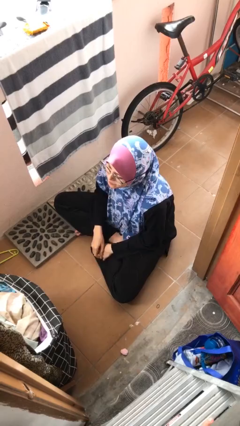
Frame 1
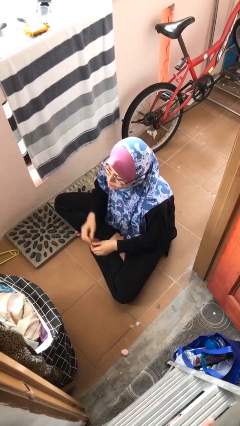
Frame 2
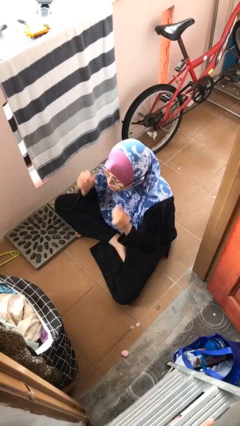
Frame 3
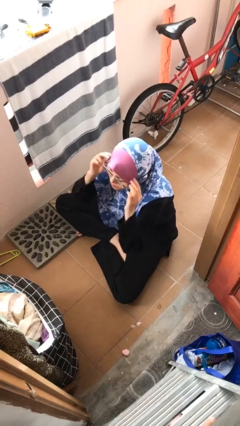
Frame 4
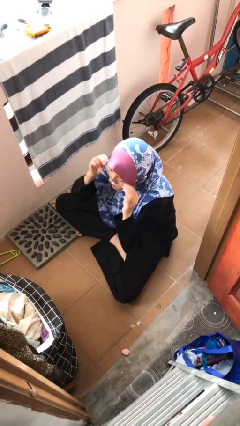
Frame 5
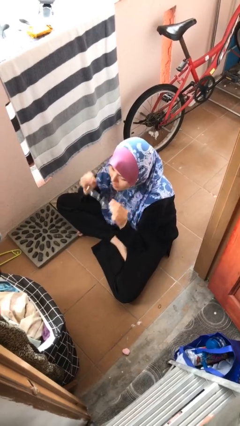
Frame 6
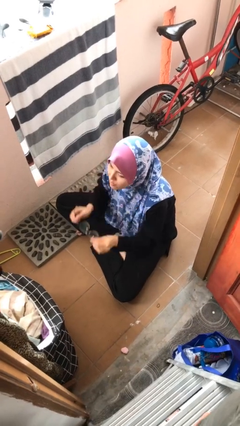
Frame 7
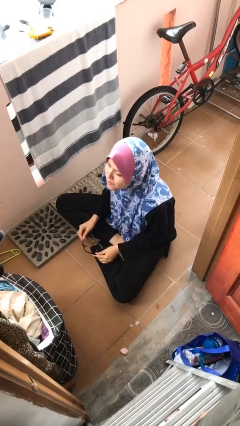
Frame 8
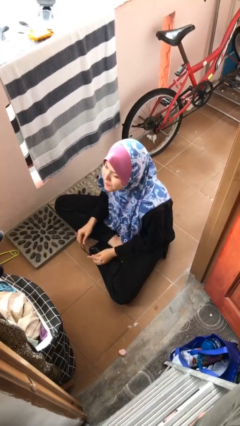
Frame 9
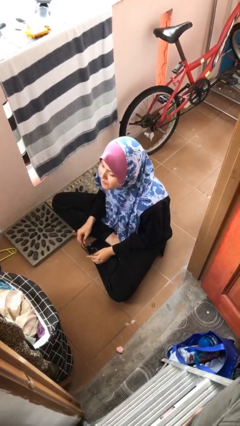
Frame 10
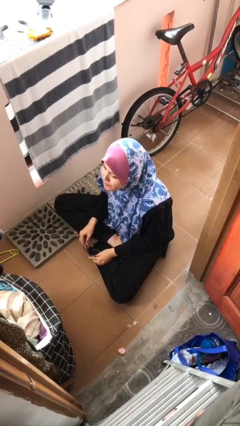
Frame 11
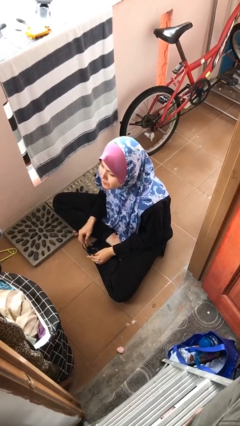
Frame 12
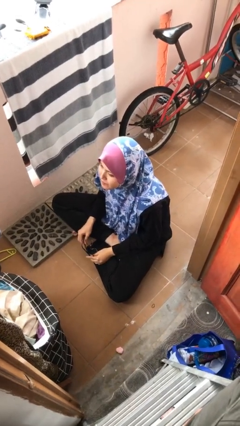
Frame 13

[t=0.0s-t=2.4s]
person takes off glasses

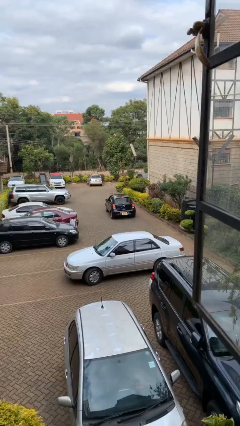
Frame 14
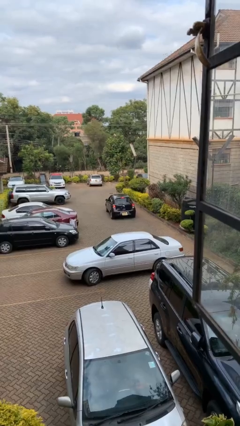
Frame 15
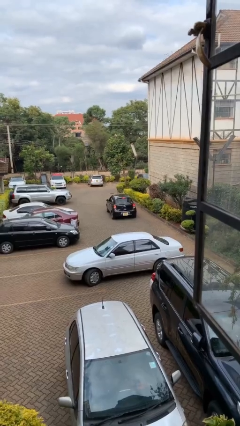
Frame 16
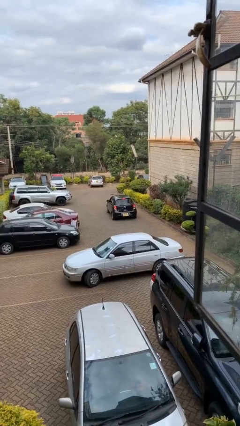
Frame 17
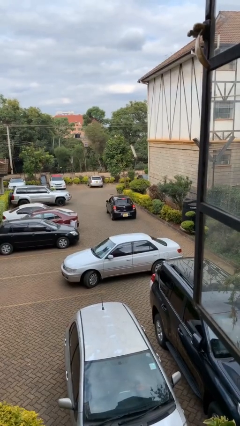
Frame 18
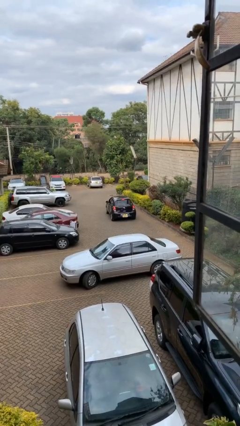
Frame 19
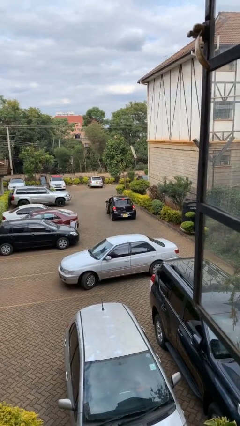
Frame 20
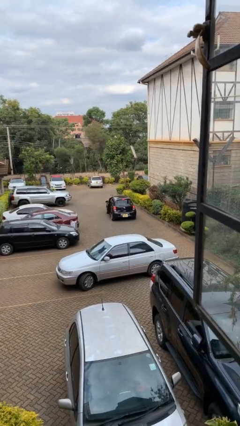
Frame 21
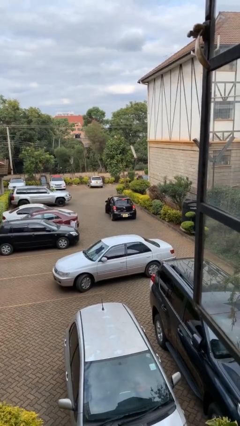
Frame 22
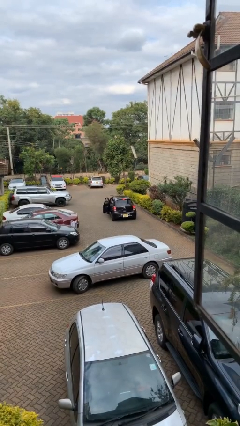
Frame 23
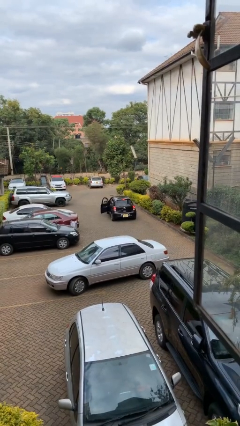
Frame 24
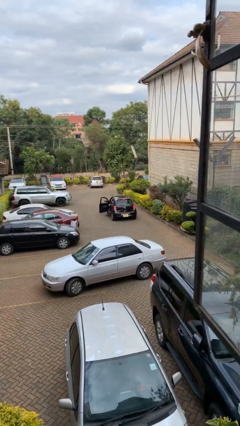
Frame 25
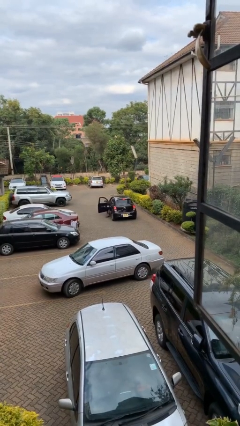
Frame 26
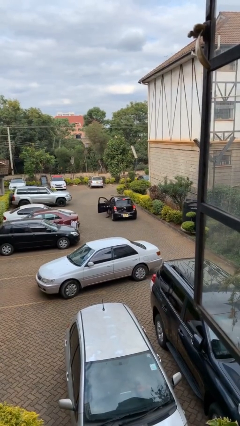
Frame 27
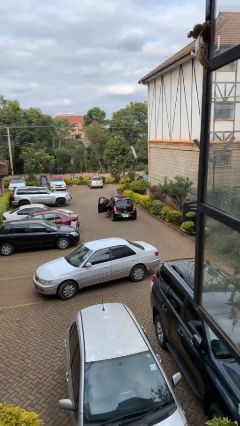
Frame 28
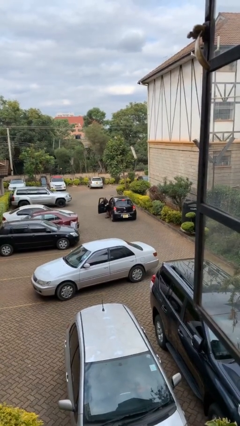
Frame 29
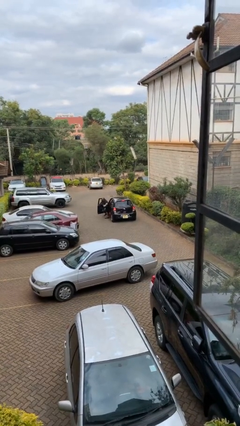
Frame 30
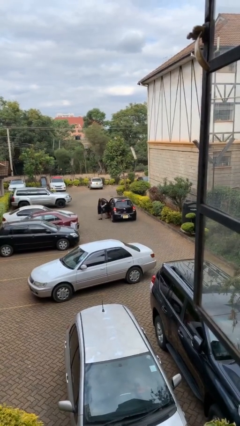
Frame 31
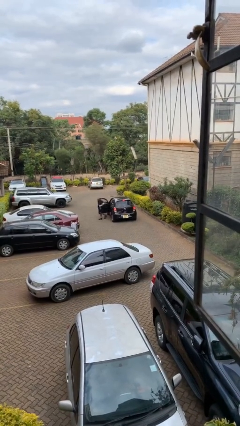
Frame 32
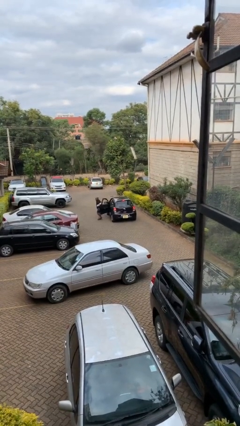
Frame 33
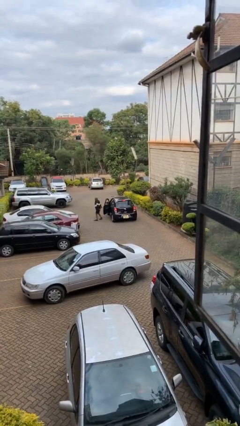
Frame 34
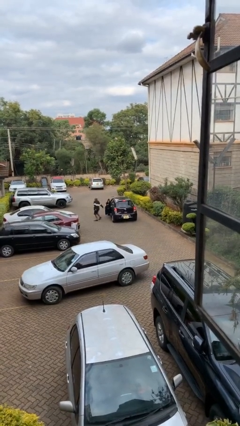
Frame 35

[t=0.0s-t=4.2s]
car drops off person

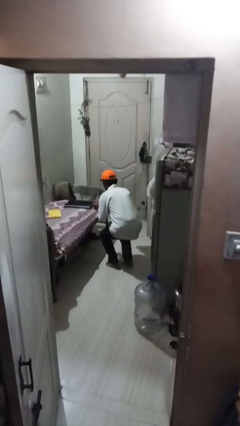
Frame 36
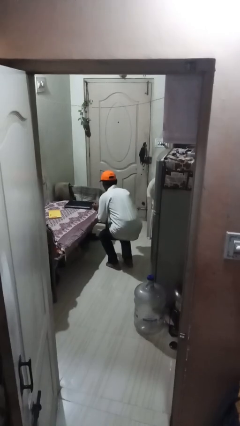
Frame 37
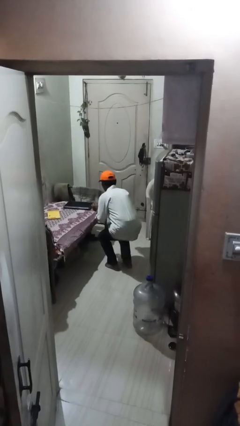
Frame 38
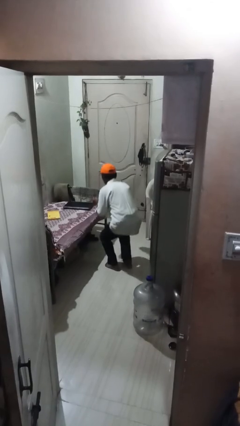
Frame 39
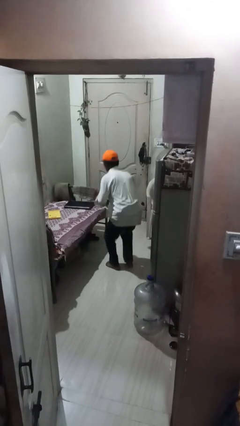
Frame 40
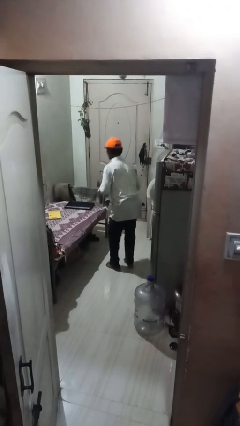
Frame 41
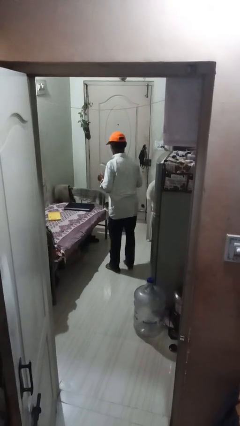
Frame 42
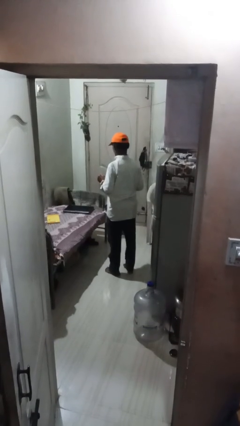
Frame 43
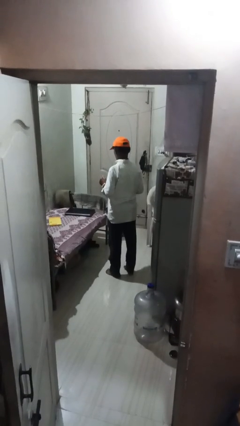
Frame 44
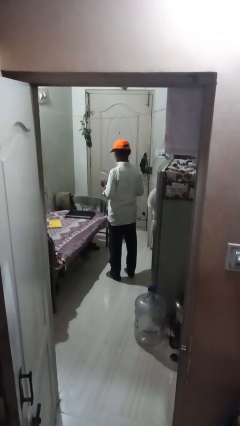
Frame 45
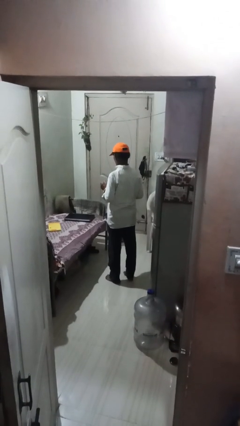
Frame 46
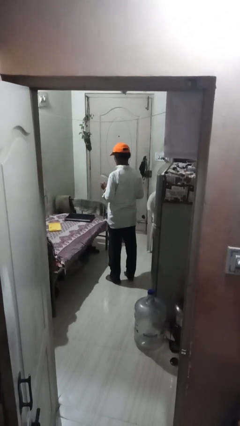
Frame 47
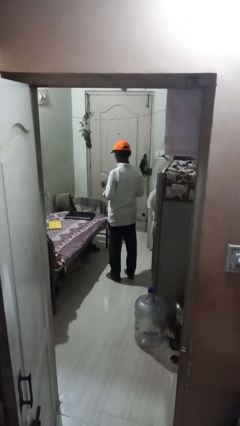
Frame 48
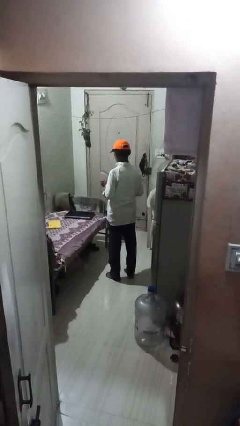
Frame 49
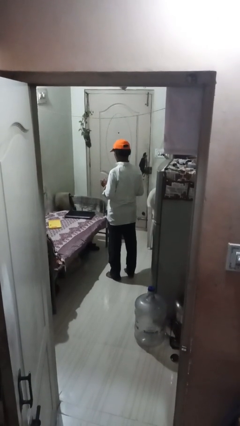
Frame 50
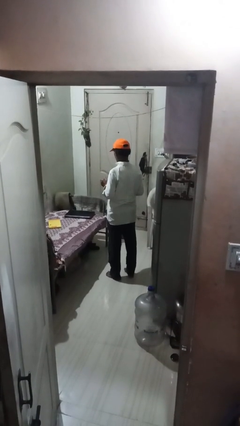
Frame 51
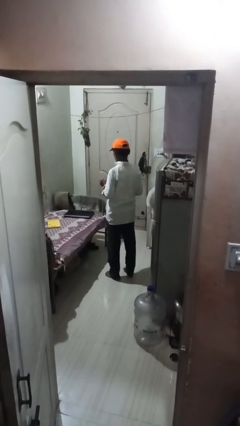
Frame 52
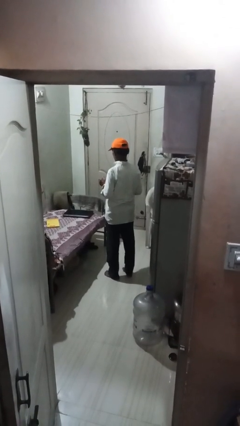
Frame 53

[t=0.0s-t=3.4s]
person stands up

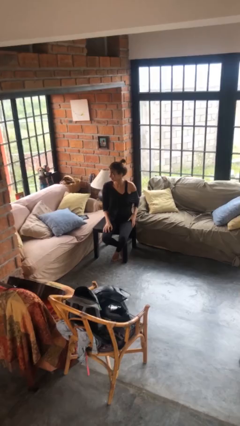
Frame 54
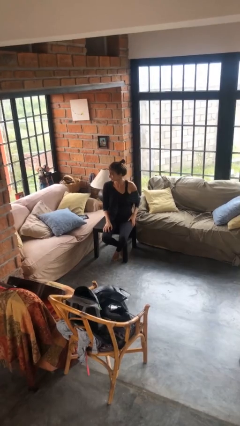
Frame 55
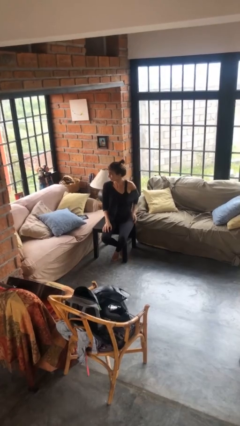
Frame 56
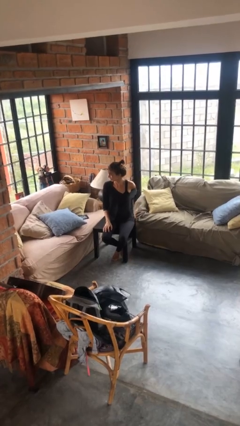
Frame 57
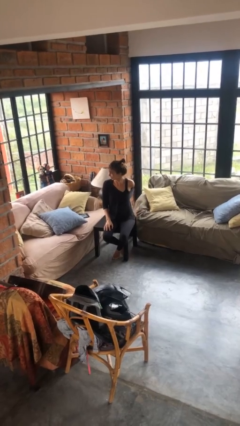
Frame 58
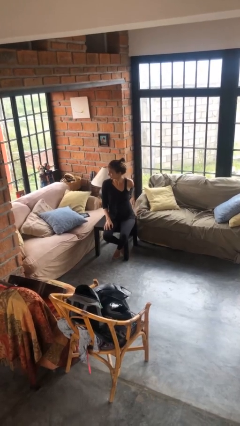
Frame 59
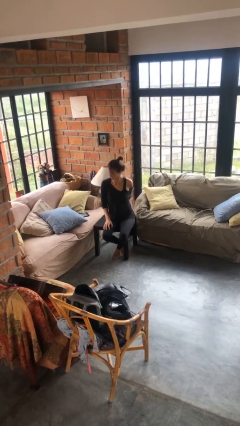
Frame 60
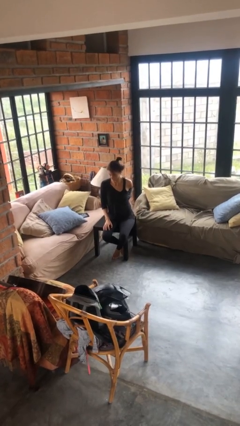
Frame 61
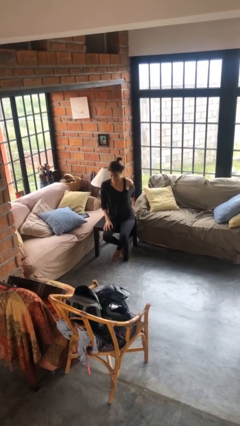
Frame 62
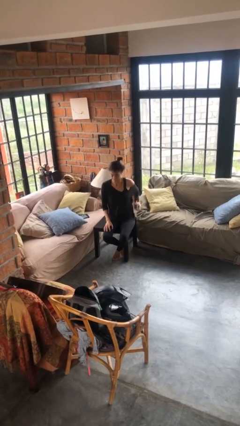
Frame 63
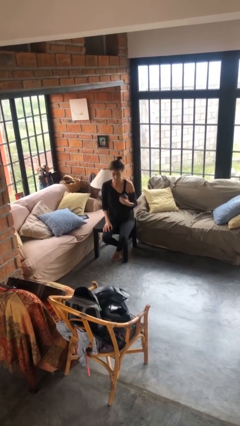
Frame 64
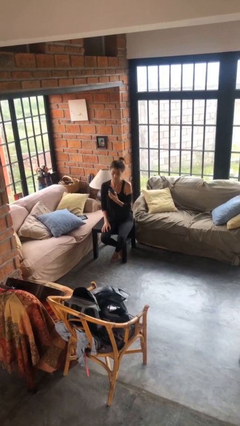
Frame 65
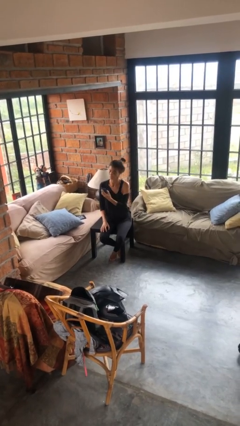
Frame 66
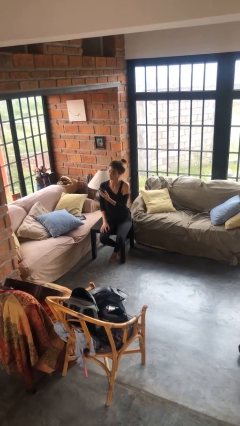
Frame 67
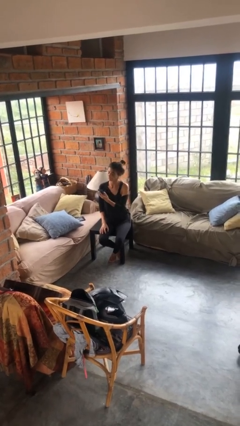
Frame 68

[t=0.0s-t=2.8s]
person takes phone from pocket

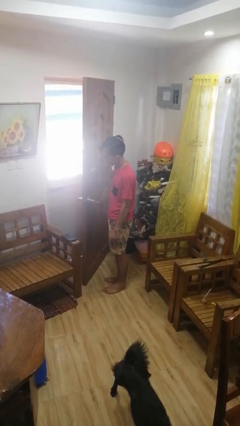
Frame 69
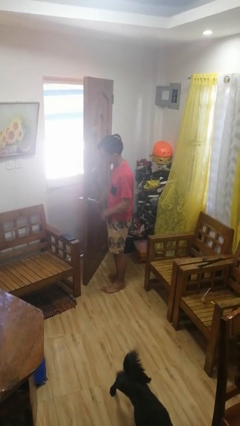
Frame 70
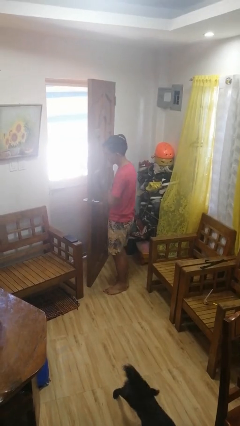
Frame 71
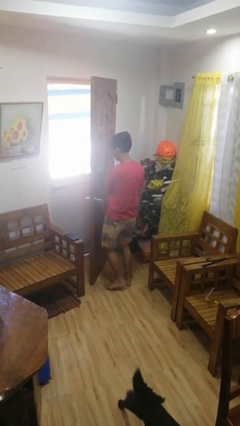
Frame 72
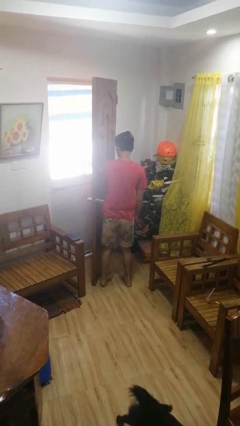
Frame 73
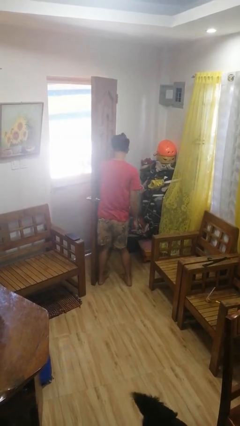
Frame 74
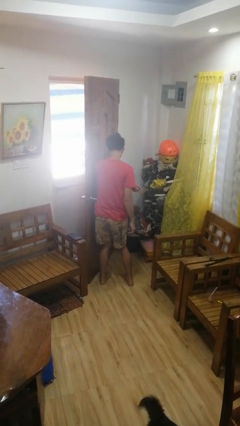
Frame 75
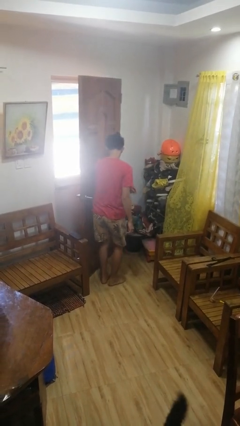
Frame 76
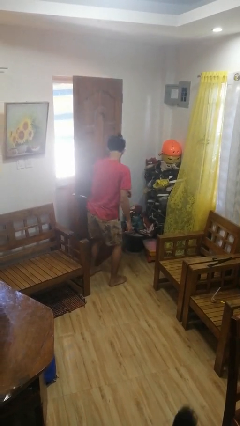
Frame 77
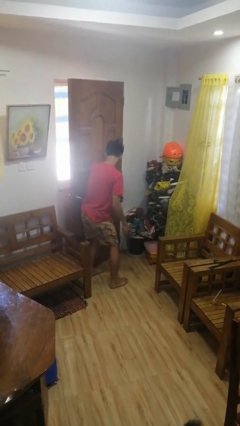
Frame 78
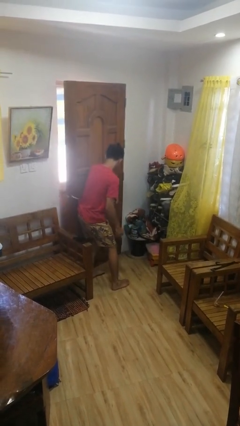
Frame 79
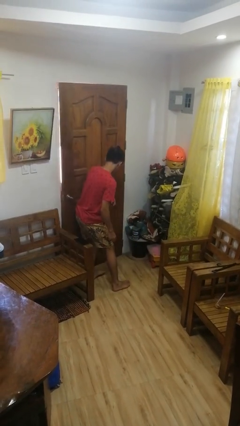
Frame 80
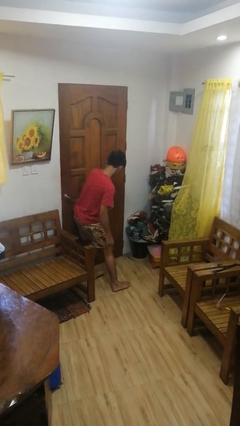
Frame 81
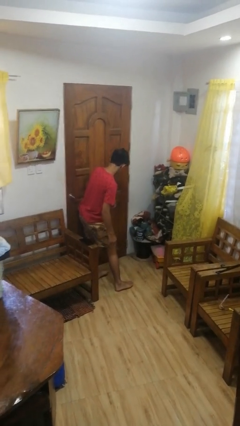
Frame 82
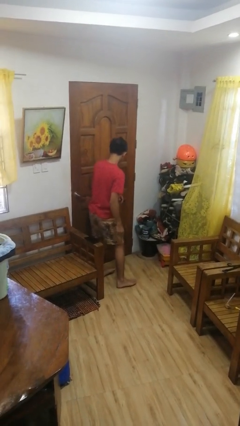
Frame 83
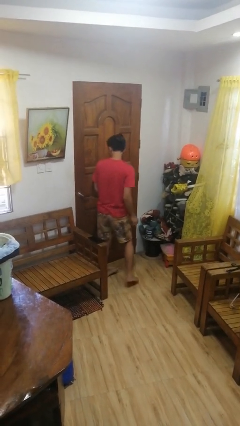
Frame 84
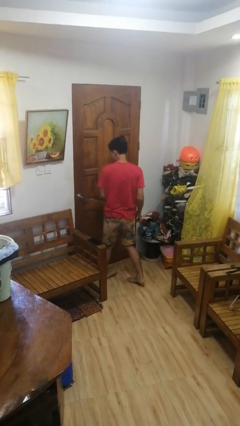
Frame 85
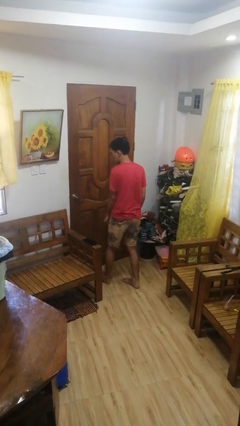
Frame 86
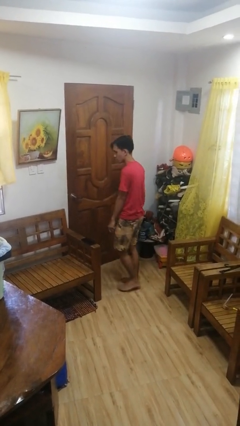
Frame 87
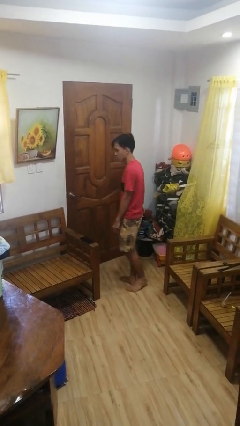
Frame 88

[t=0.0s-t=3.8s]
person closes door with hip

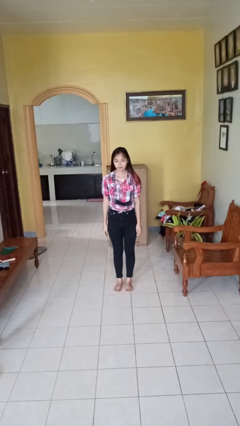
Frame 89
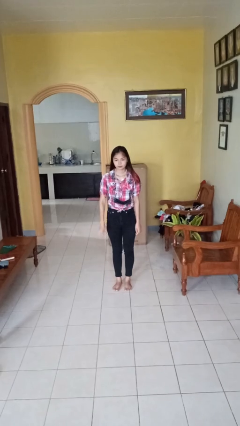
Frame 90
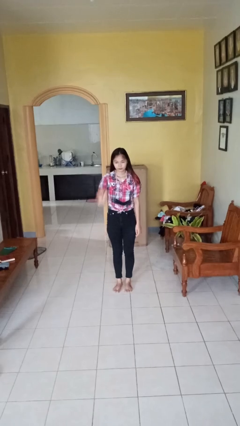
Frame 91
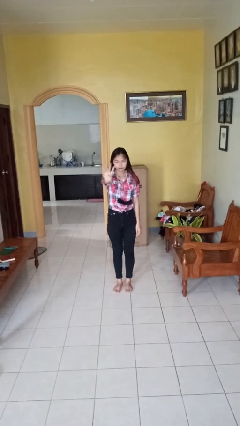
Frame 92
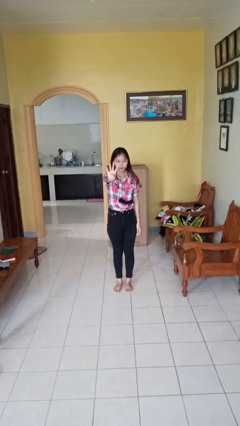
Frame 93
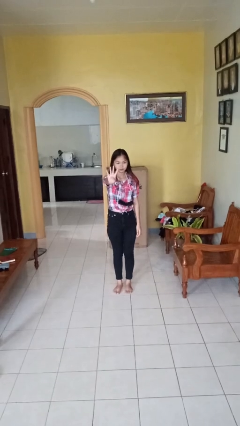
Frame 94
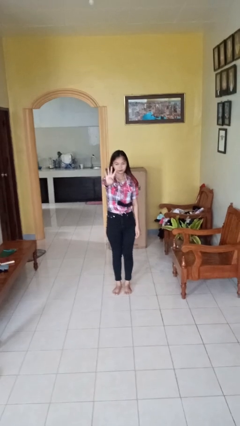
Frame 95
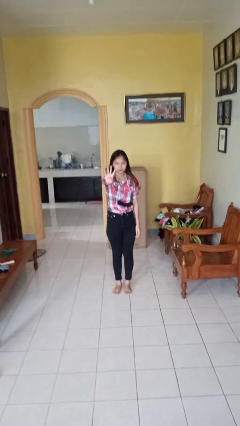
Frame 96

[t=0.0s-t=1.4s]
person gestures number four
